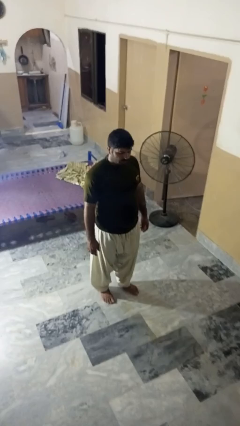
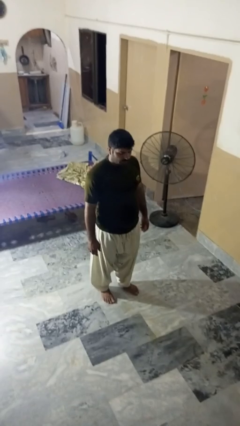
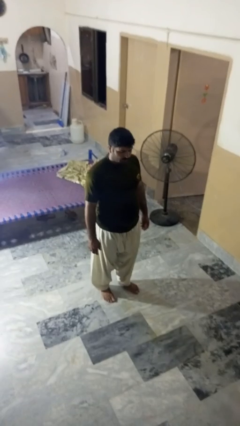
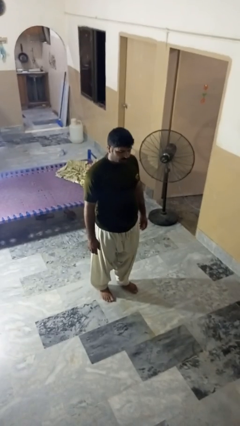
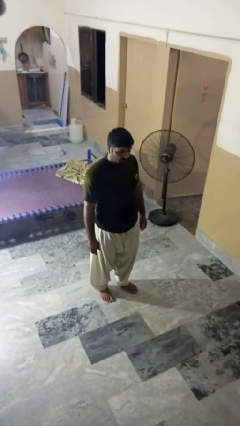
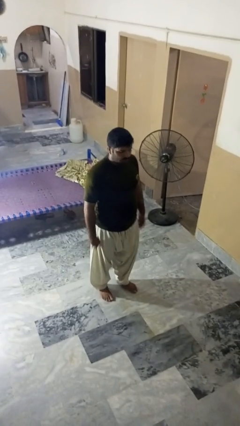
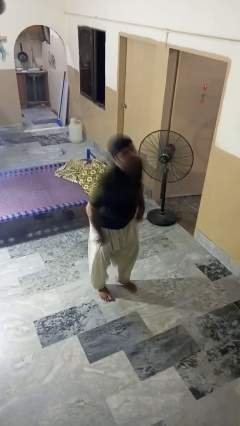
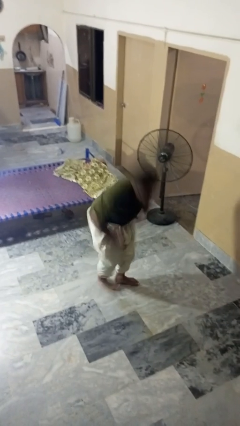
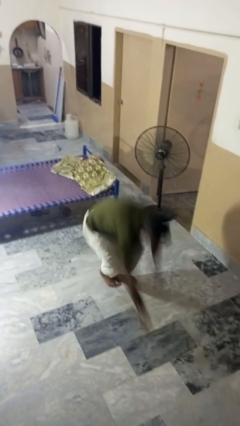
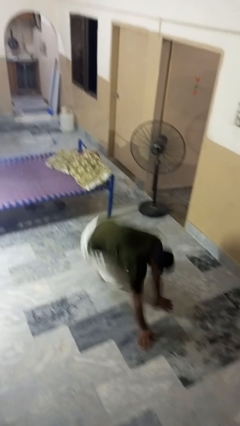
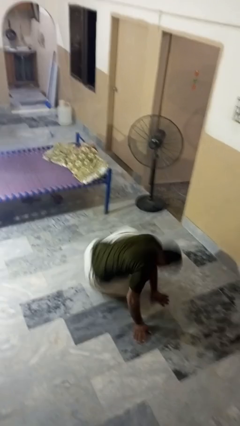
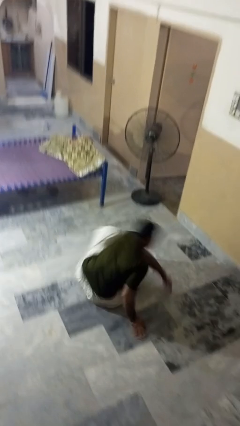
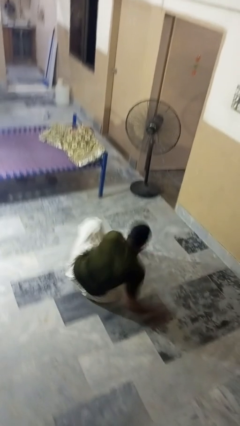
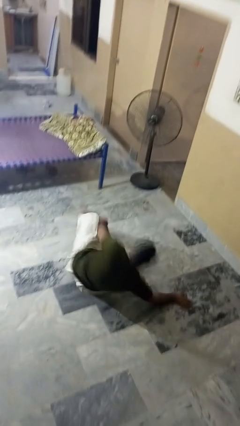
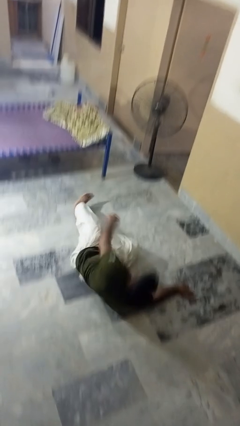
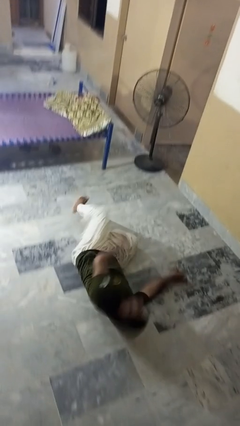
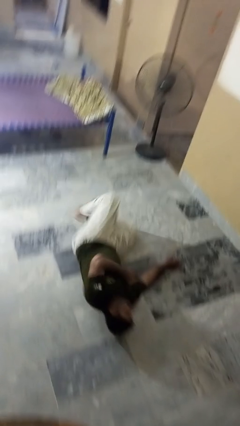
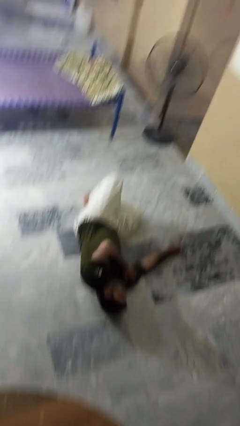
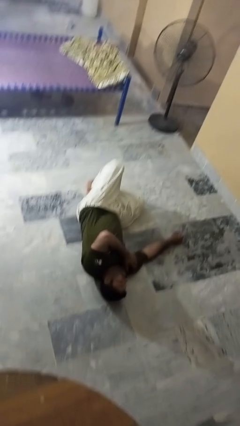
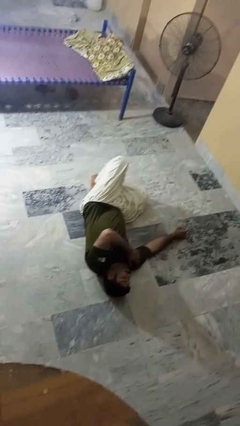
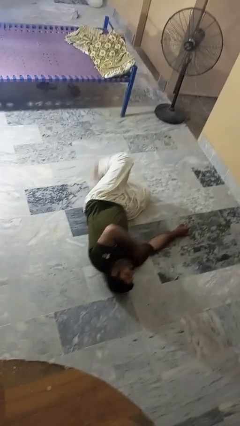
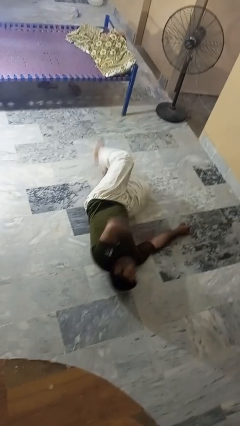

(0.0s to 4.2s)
person falls while standing

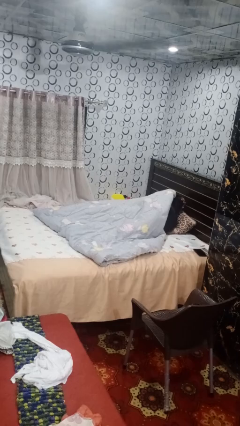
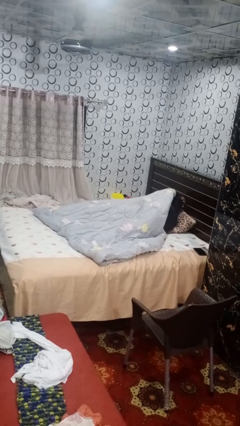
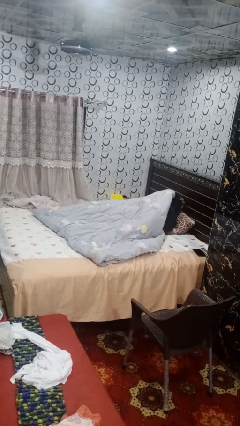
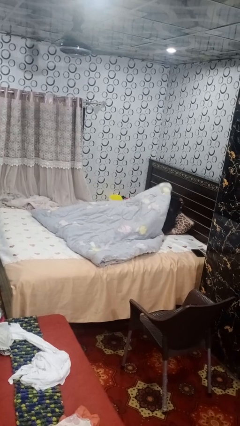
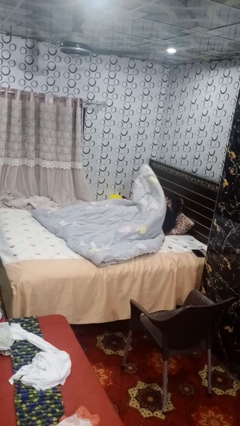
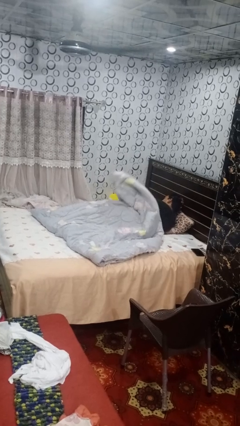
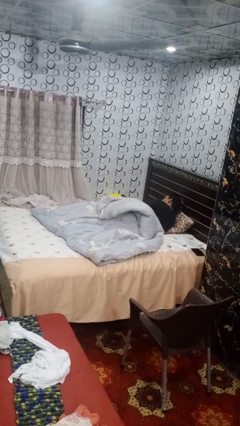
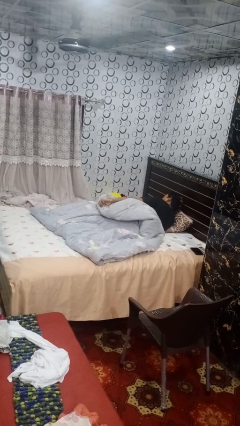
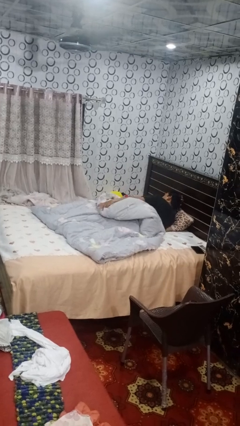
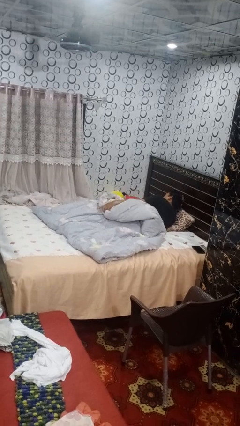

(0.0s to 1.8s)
person uncovers with blanket

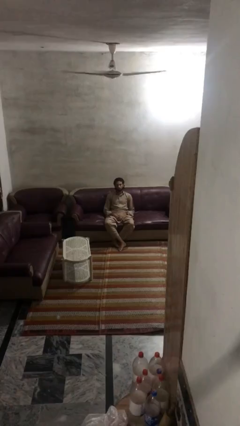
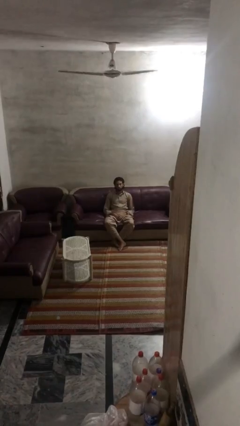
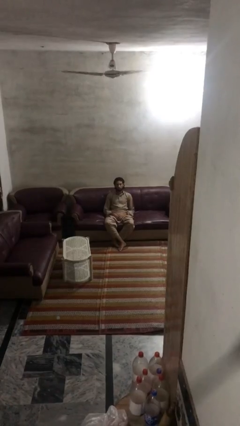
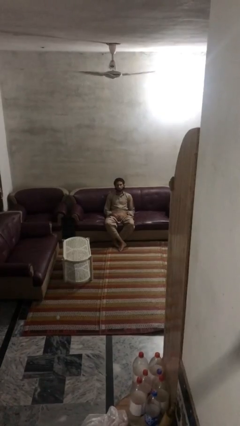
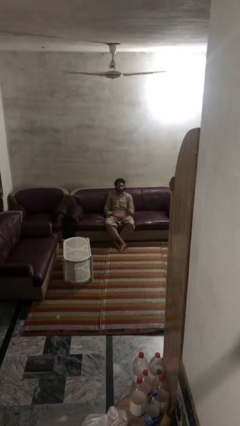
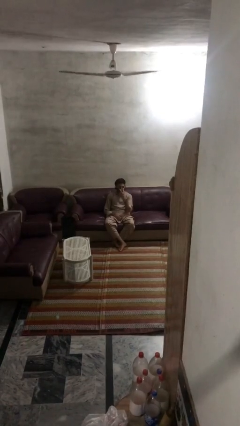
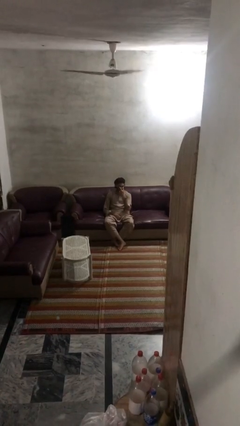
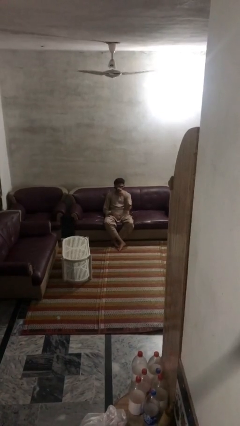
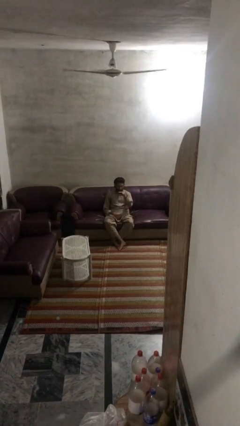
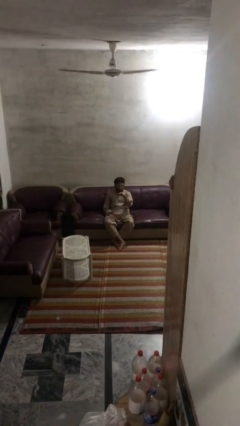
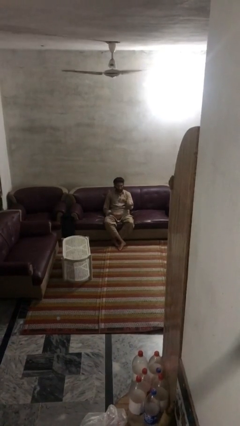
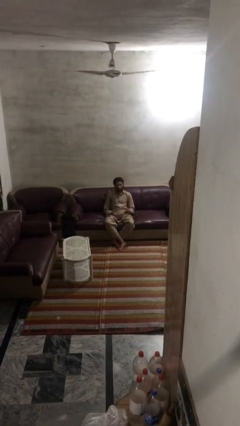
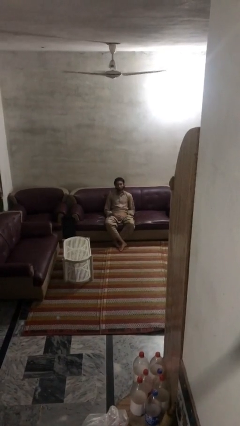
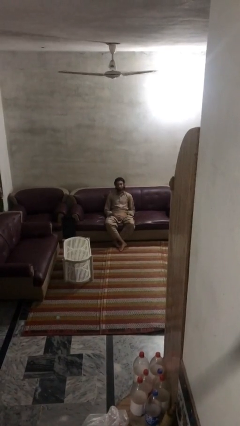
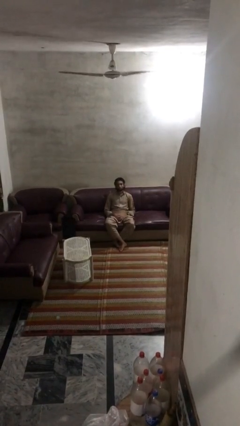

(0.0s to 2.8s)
person gestures watch closely

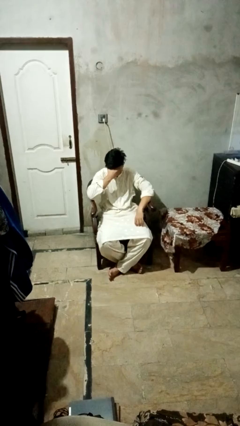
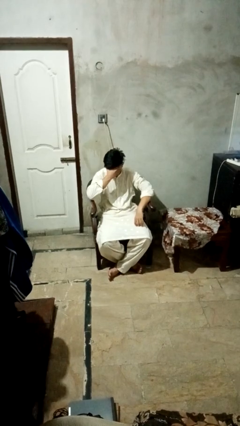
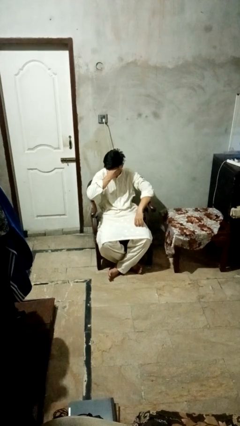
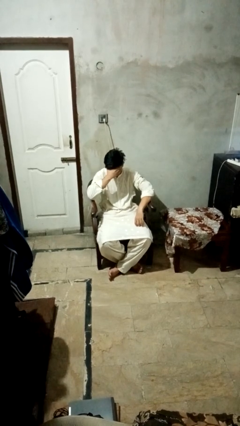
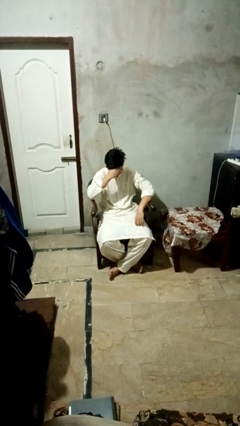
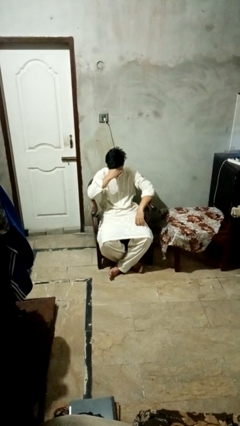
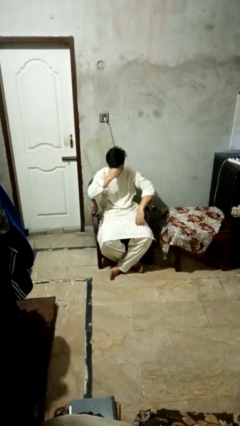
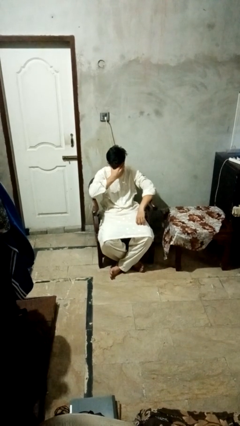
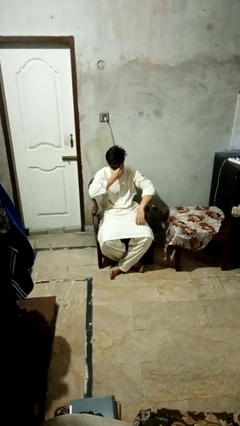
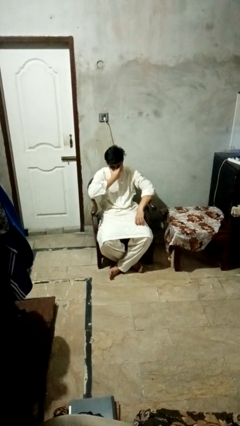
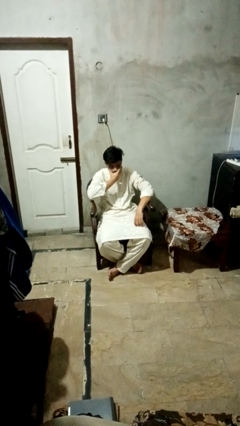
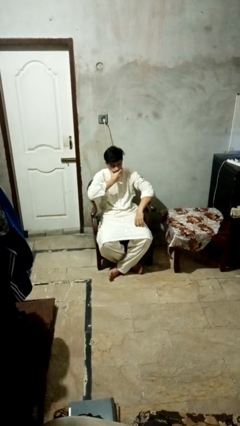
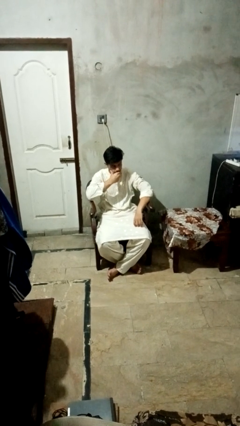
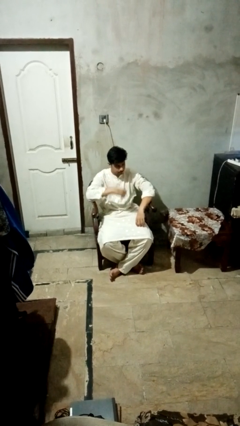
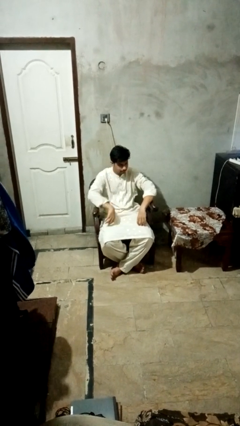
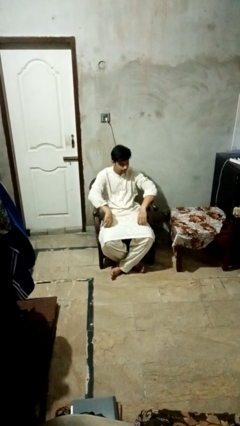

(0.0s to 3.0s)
person covers face with hands

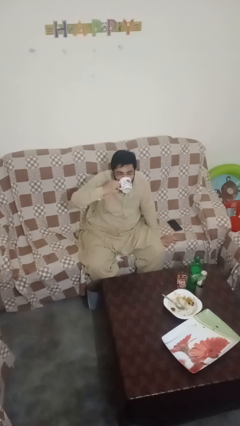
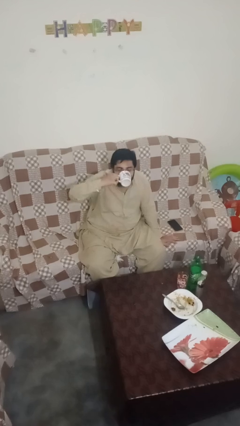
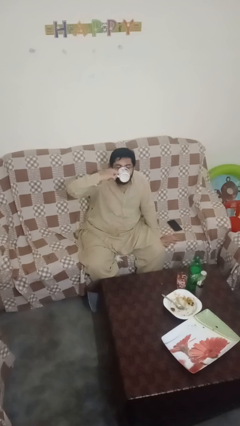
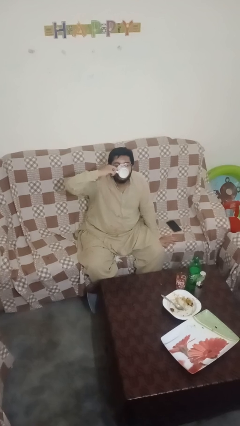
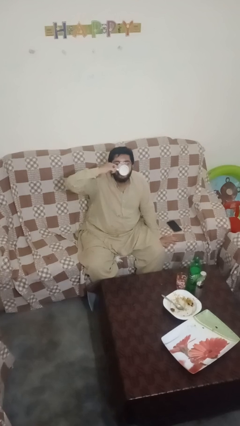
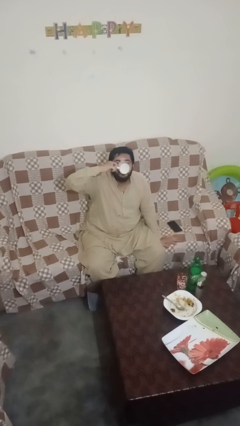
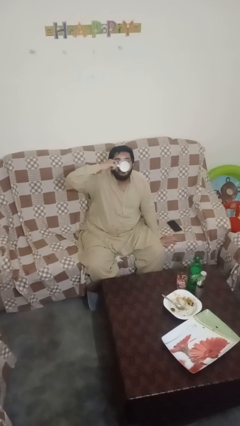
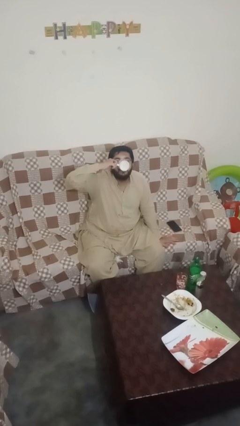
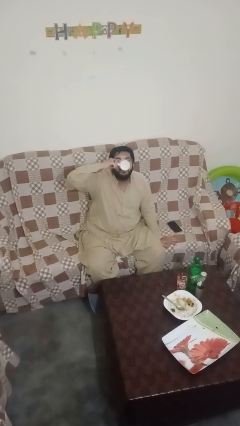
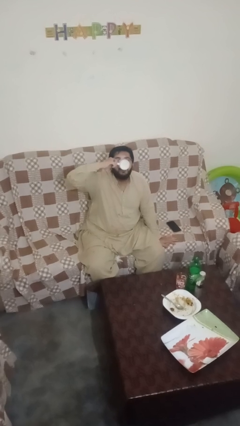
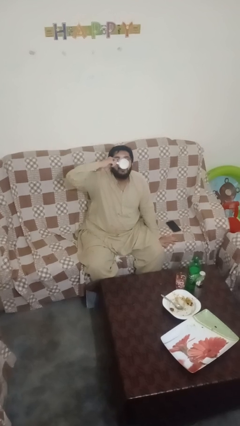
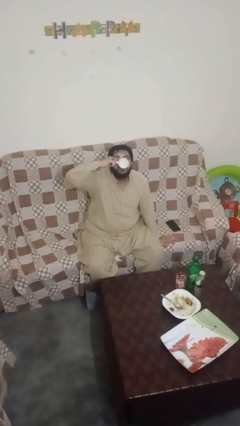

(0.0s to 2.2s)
person drinks from mug

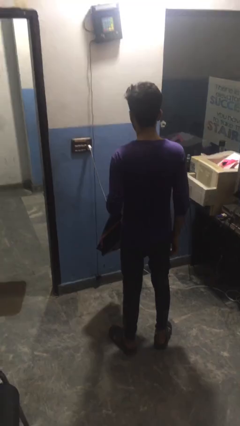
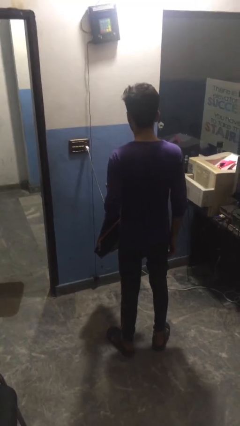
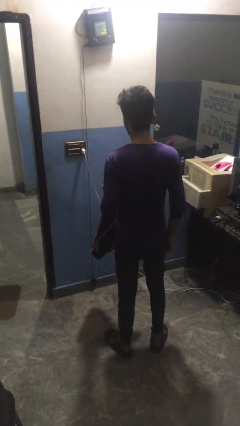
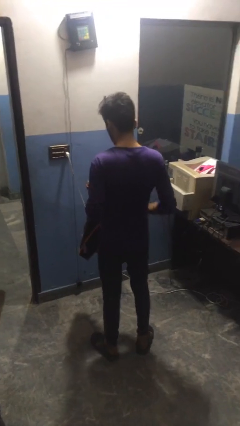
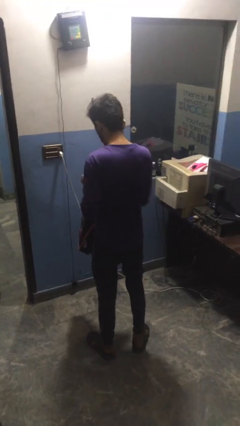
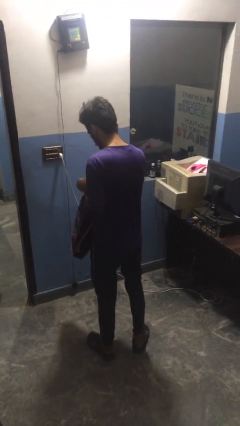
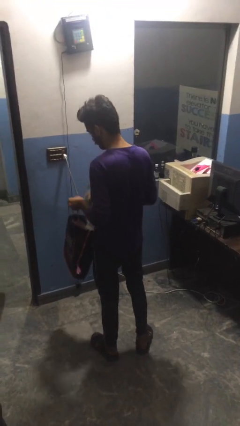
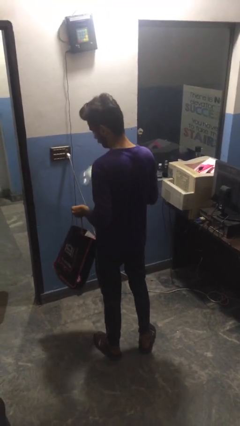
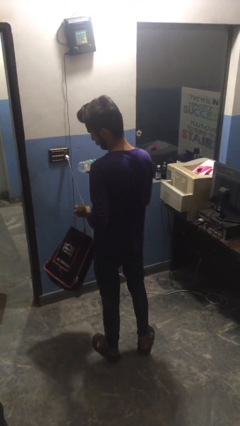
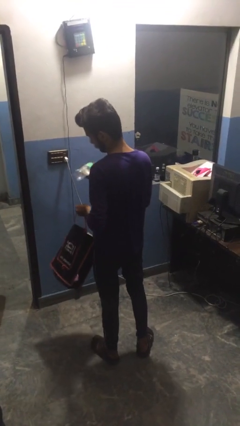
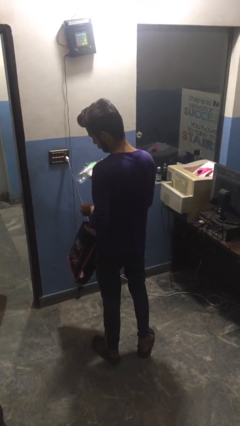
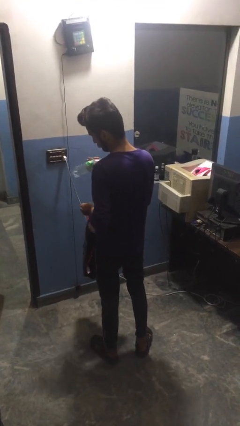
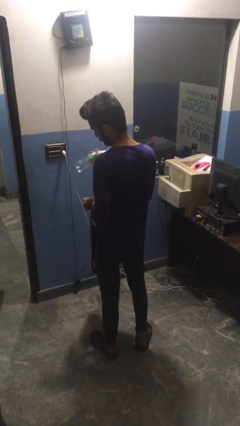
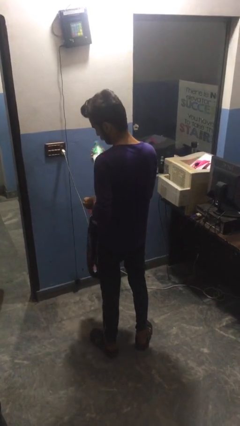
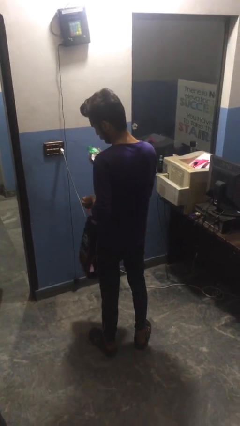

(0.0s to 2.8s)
person takes object from bag

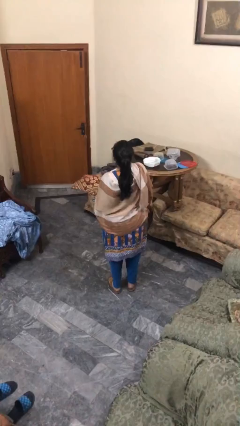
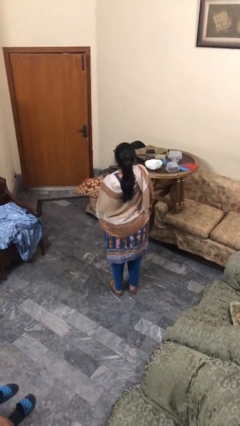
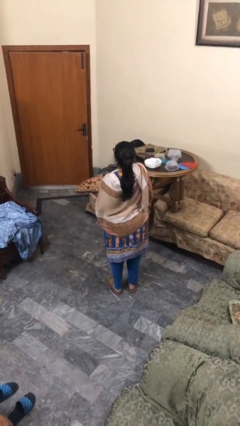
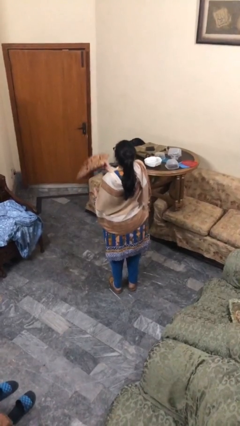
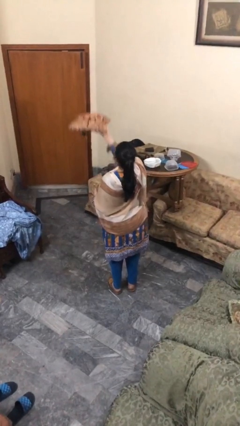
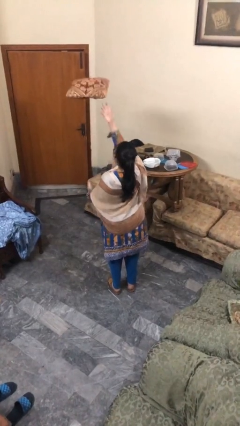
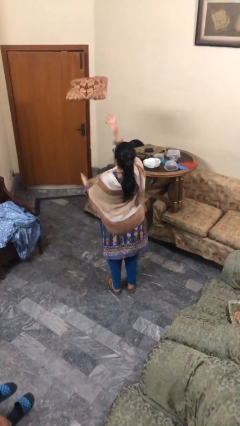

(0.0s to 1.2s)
person drops object
